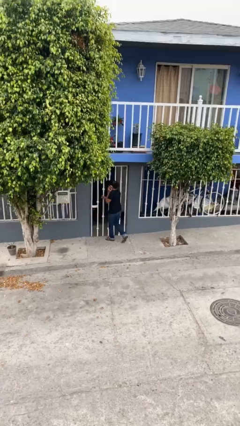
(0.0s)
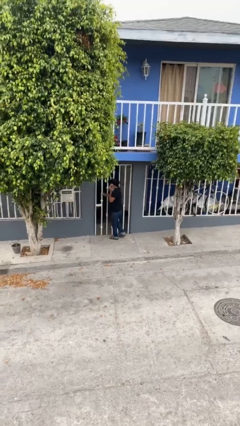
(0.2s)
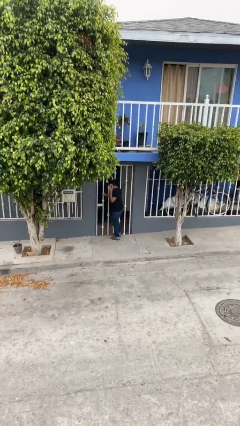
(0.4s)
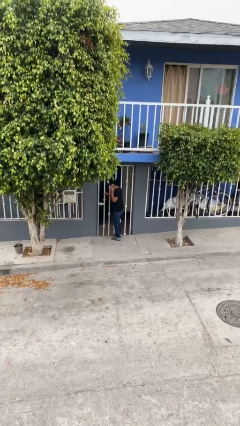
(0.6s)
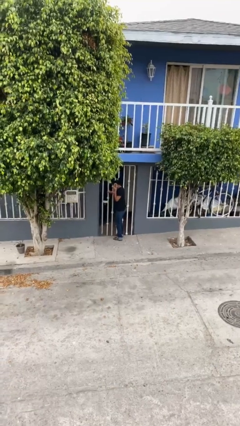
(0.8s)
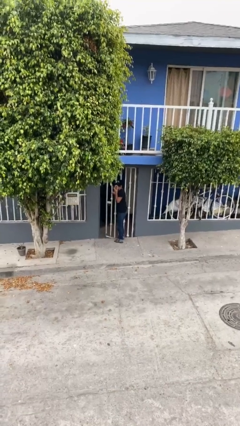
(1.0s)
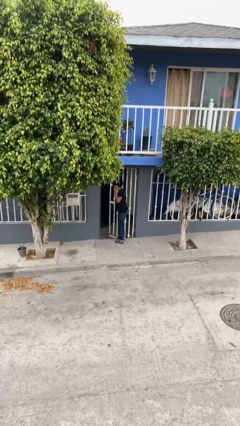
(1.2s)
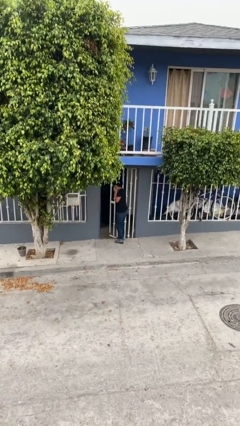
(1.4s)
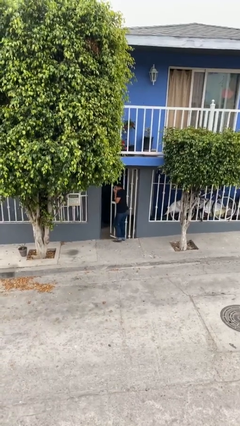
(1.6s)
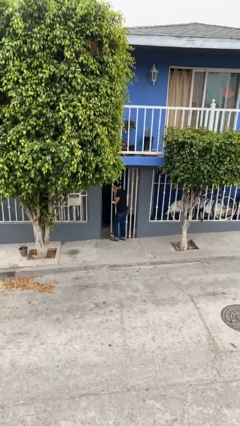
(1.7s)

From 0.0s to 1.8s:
person opens facility door

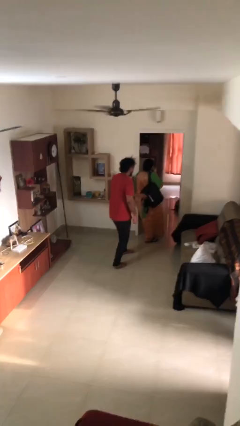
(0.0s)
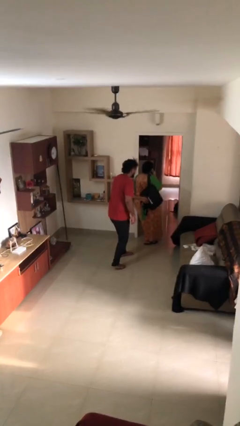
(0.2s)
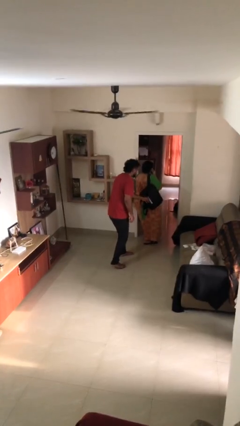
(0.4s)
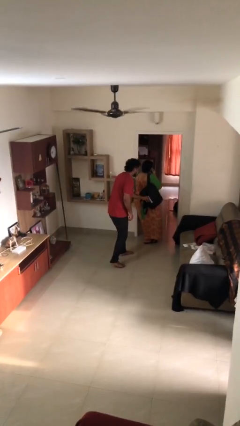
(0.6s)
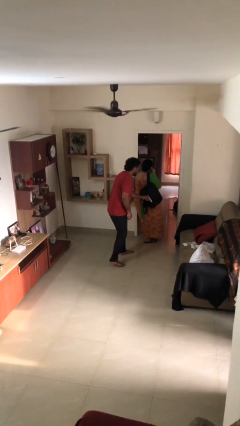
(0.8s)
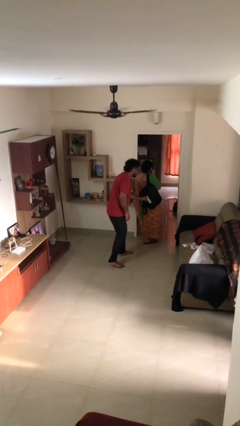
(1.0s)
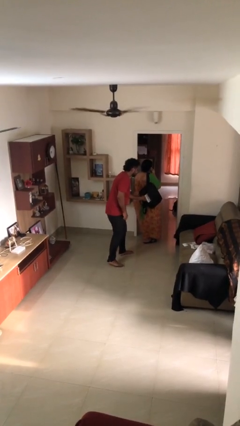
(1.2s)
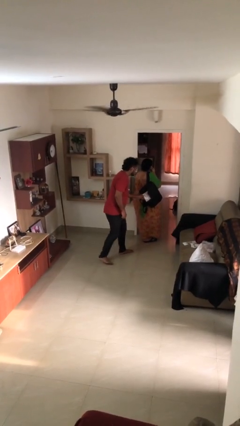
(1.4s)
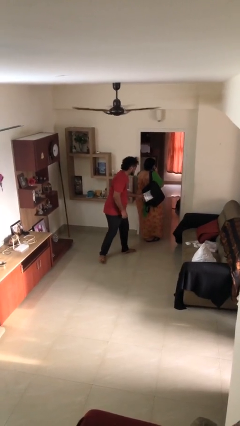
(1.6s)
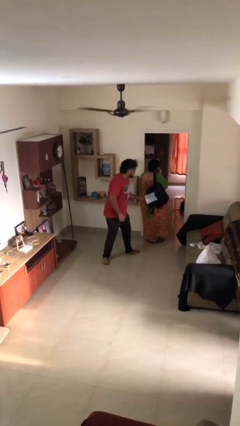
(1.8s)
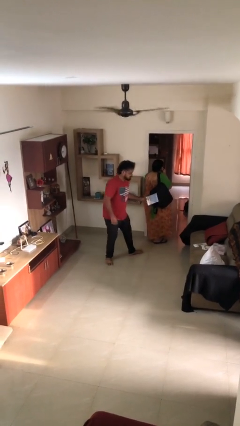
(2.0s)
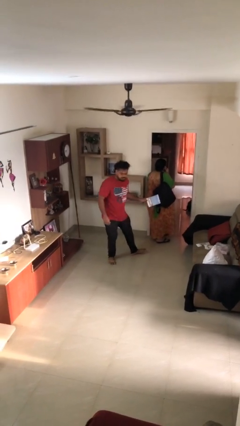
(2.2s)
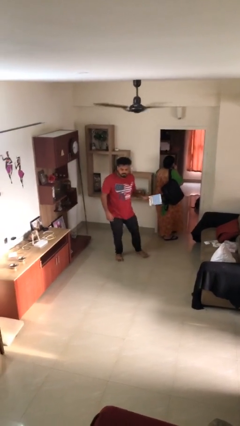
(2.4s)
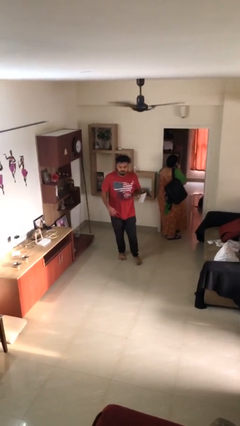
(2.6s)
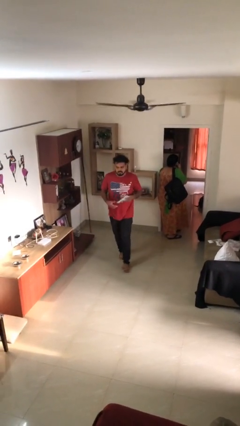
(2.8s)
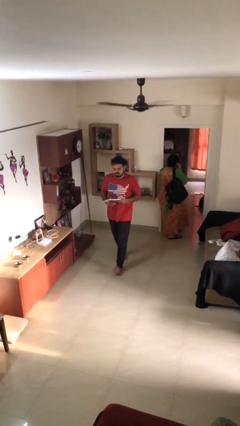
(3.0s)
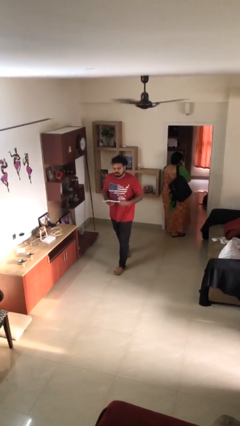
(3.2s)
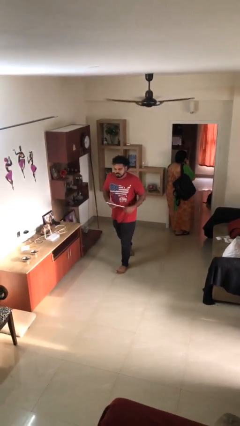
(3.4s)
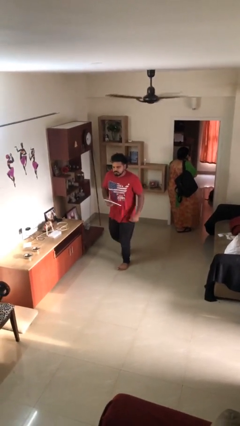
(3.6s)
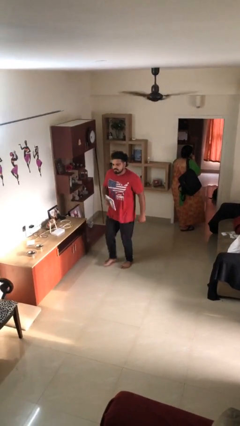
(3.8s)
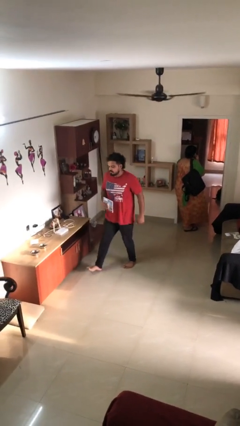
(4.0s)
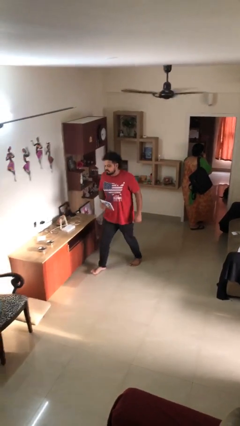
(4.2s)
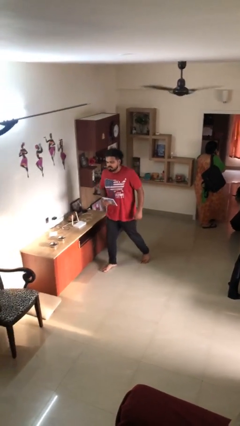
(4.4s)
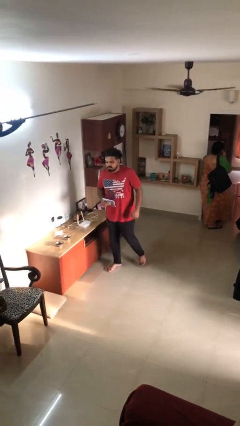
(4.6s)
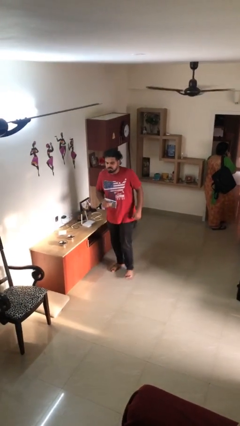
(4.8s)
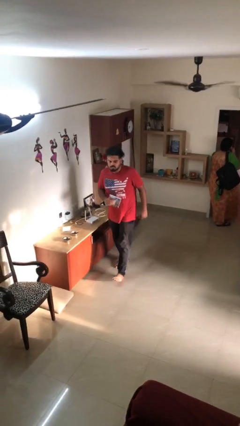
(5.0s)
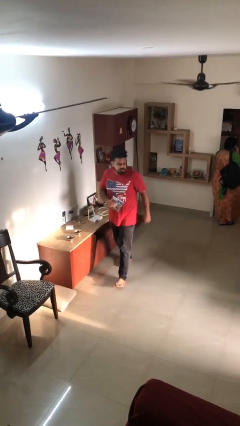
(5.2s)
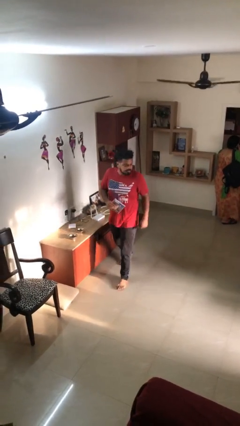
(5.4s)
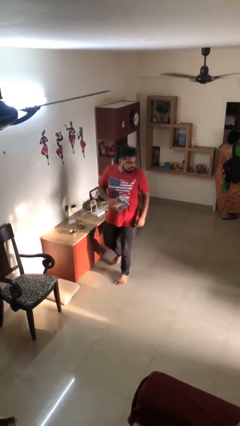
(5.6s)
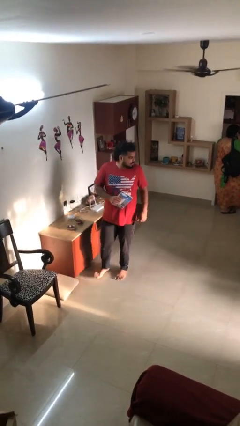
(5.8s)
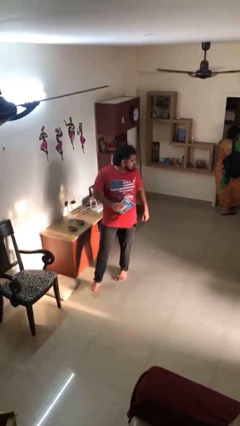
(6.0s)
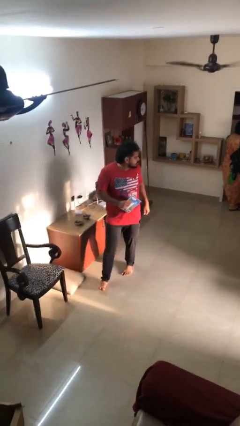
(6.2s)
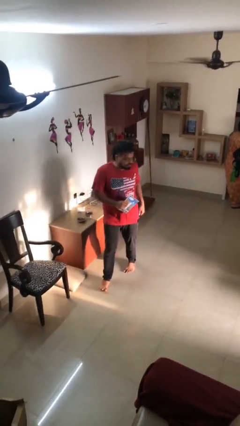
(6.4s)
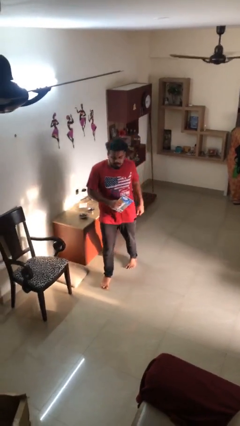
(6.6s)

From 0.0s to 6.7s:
person steals object from person

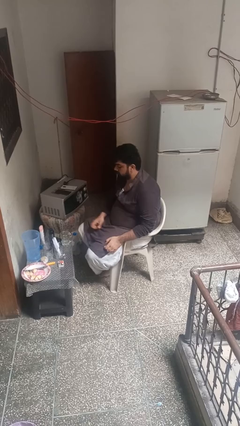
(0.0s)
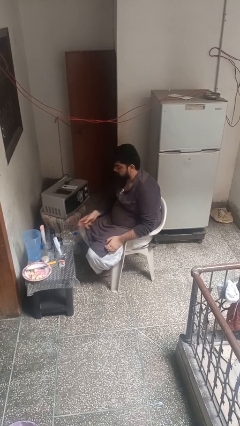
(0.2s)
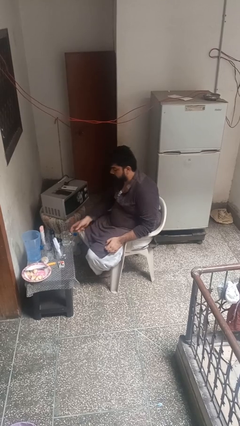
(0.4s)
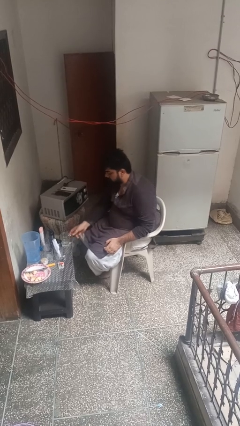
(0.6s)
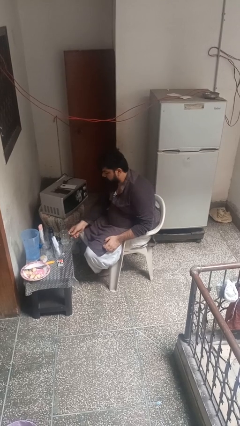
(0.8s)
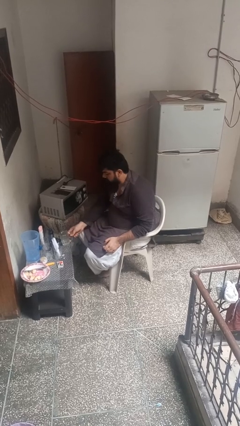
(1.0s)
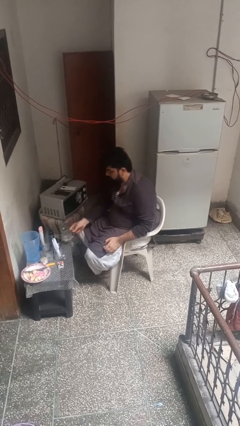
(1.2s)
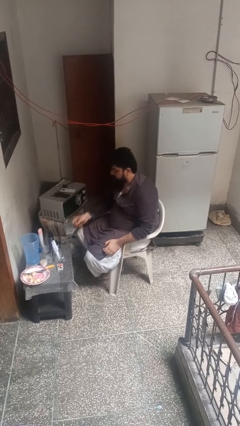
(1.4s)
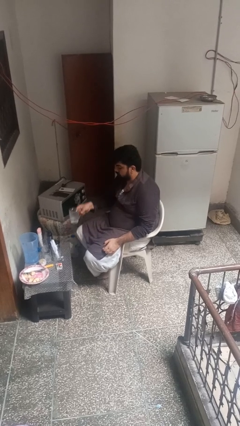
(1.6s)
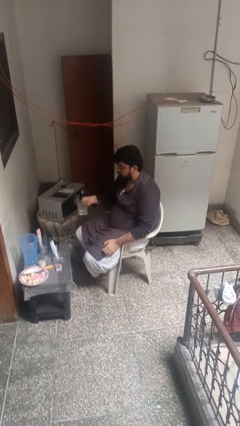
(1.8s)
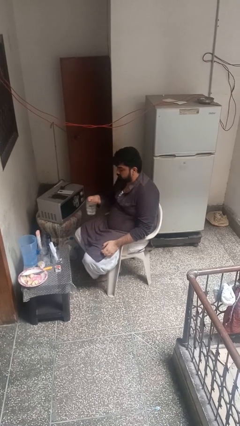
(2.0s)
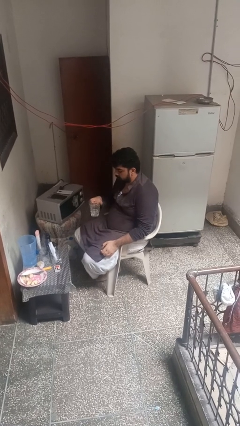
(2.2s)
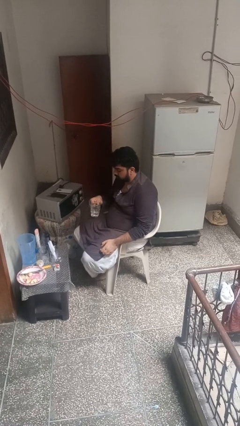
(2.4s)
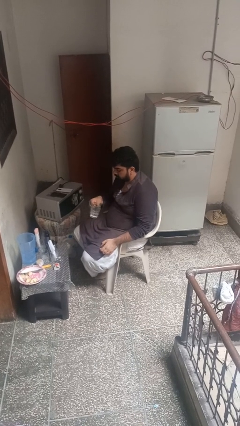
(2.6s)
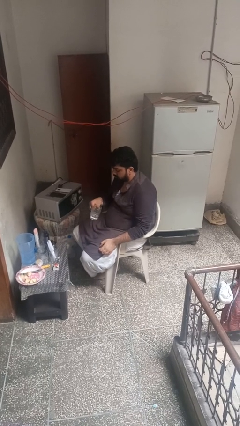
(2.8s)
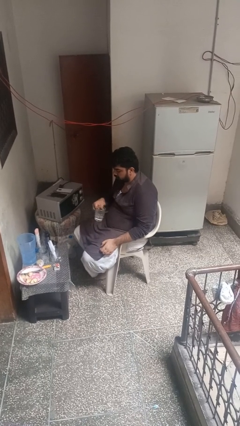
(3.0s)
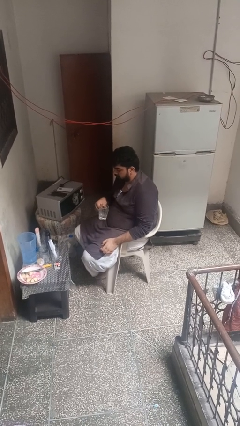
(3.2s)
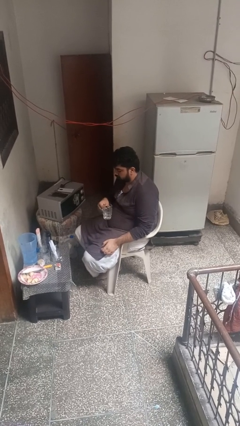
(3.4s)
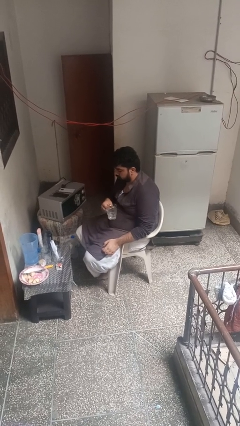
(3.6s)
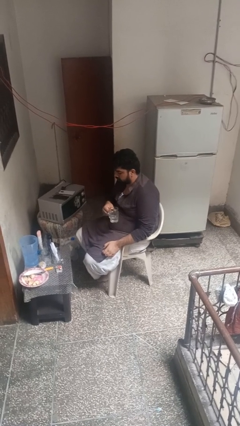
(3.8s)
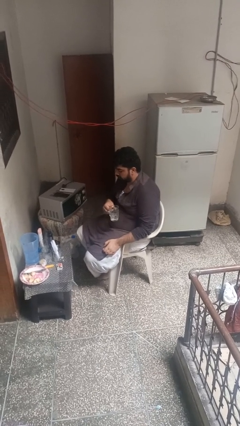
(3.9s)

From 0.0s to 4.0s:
person picks up object from table

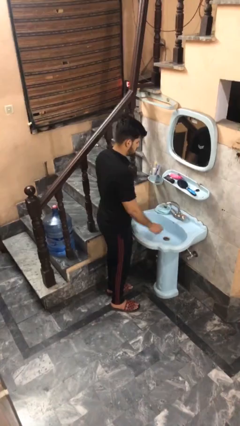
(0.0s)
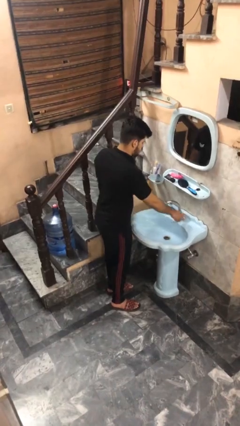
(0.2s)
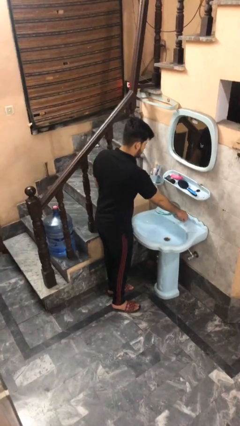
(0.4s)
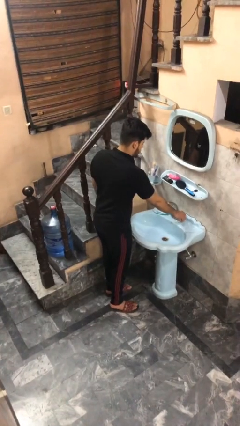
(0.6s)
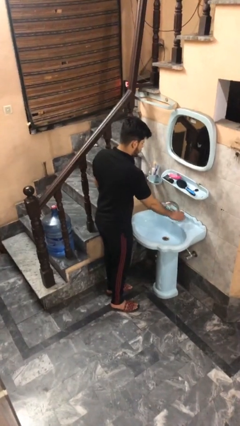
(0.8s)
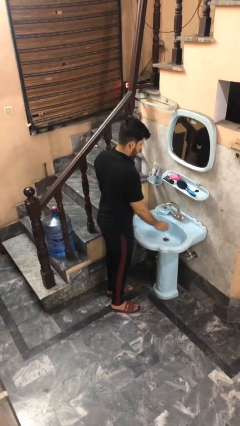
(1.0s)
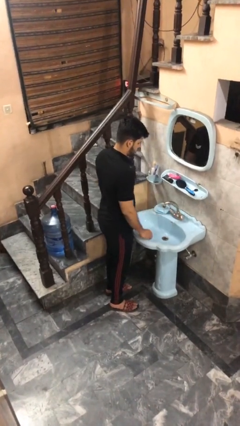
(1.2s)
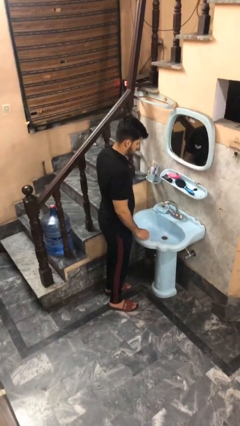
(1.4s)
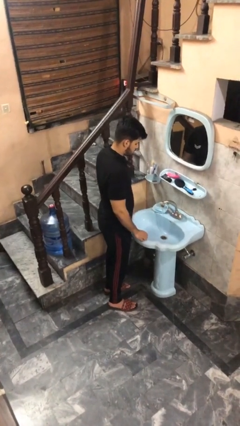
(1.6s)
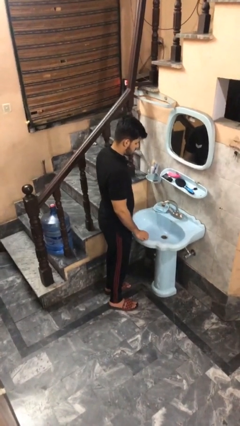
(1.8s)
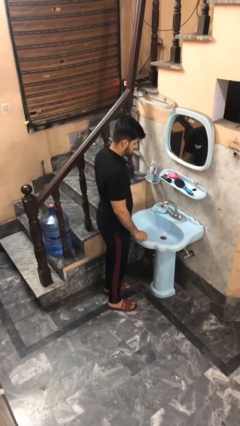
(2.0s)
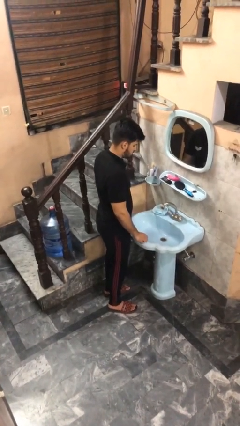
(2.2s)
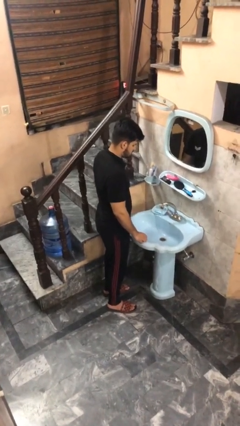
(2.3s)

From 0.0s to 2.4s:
person turns on faucet

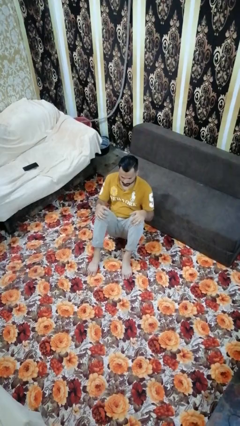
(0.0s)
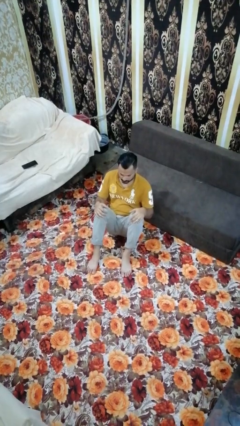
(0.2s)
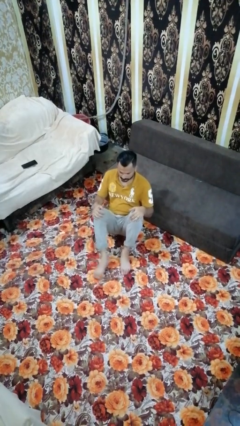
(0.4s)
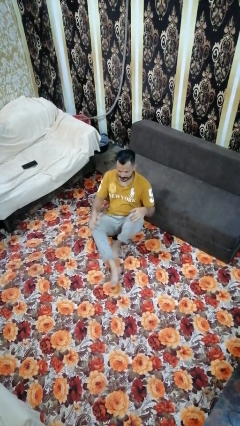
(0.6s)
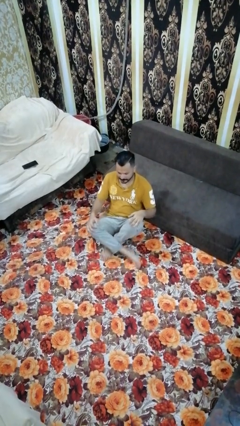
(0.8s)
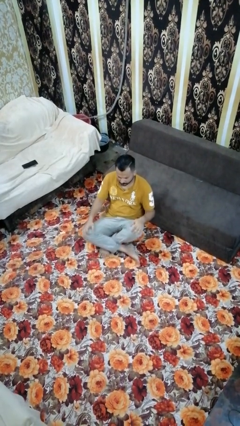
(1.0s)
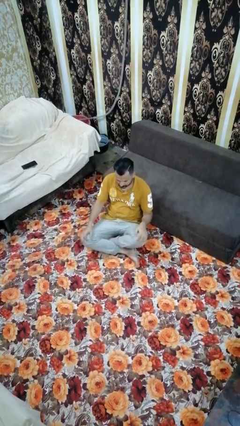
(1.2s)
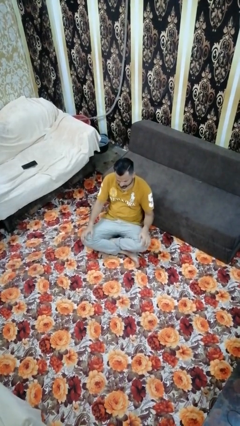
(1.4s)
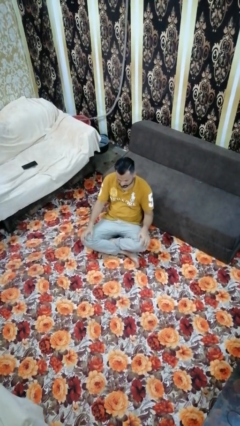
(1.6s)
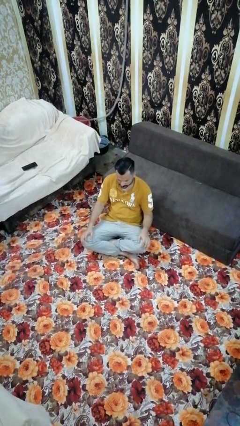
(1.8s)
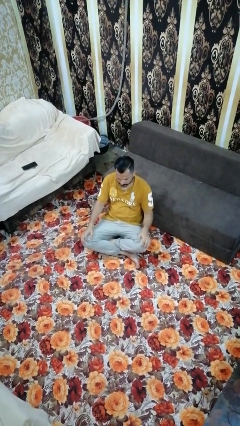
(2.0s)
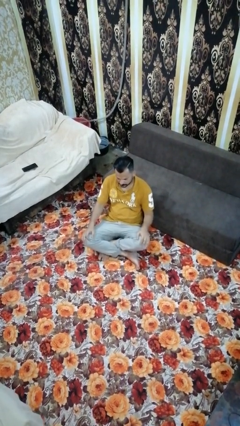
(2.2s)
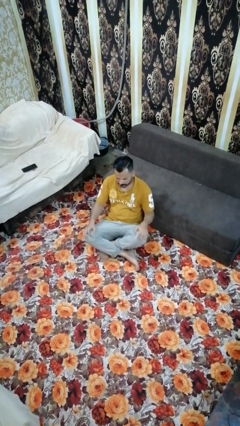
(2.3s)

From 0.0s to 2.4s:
person crosses legs

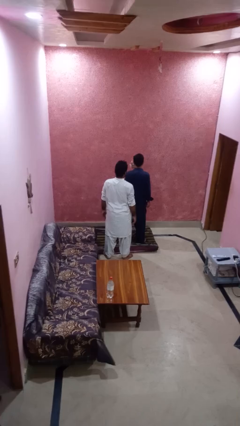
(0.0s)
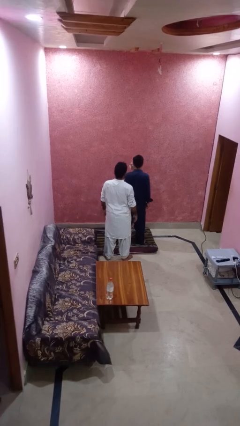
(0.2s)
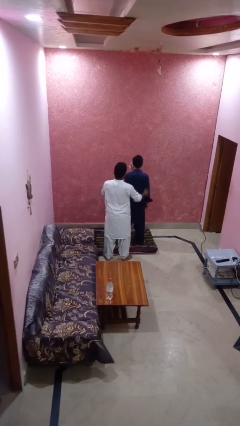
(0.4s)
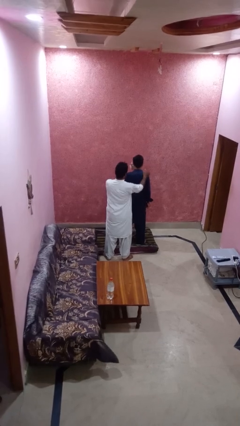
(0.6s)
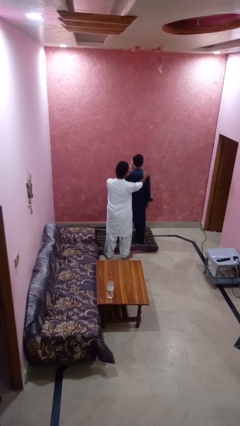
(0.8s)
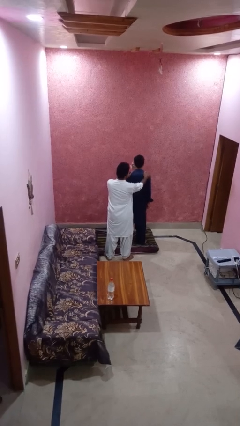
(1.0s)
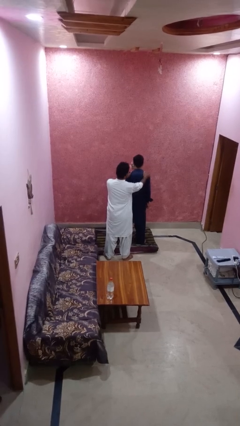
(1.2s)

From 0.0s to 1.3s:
person grabs person by shoulder
